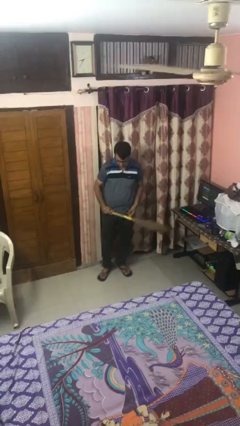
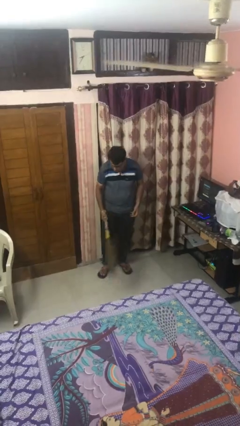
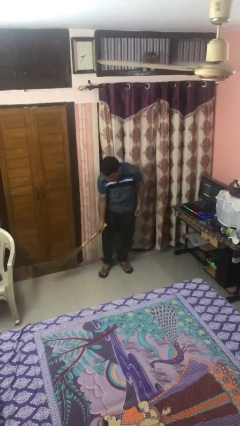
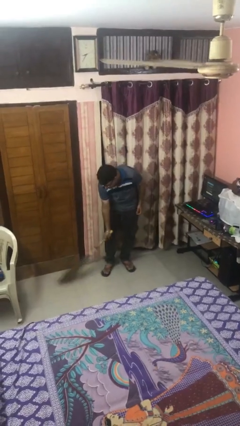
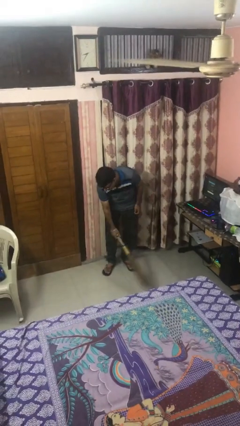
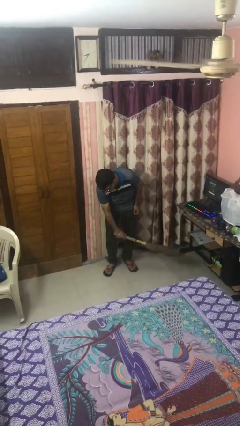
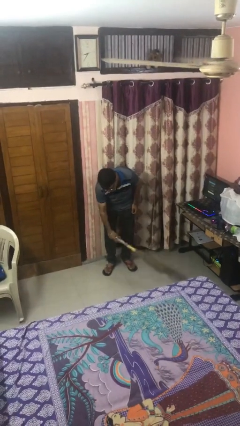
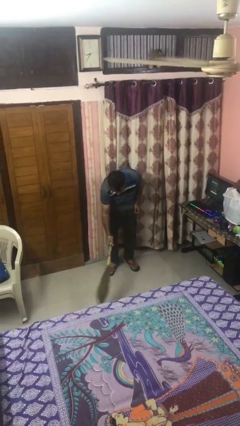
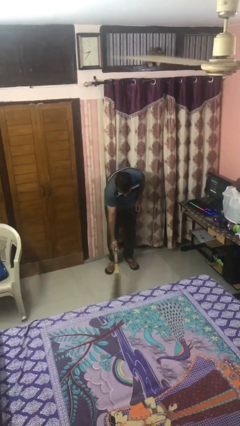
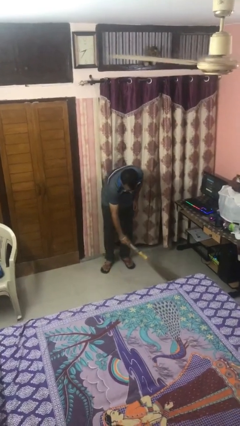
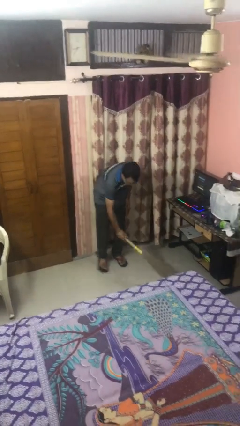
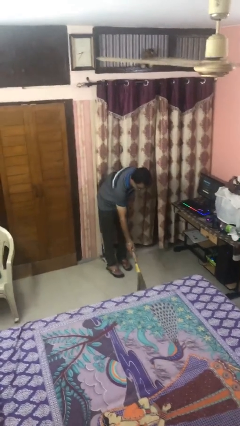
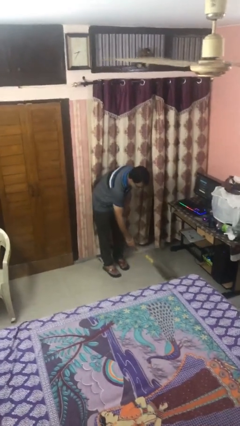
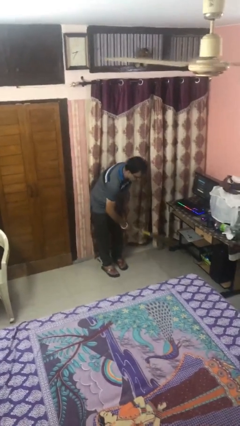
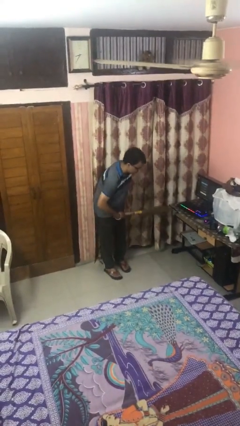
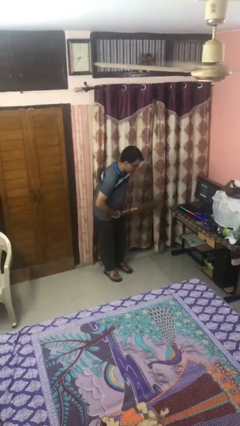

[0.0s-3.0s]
person sweeps floor

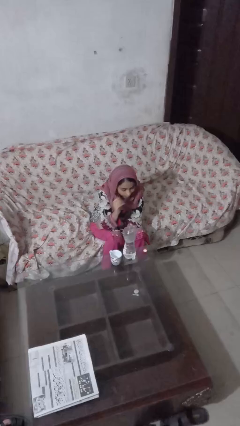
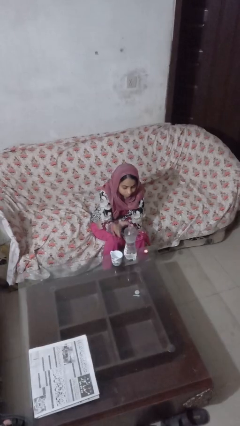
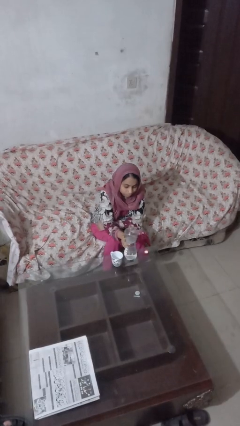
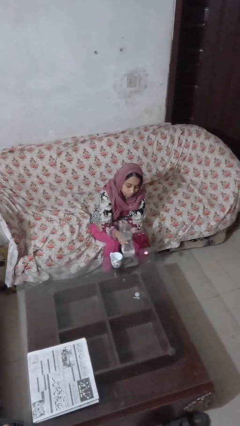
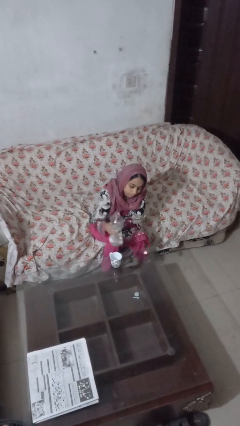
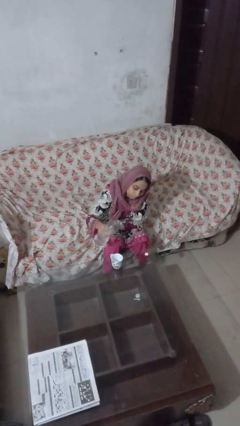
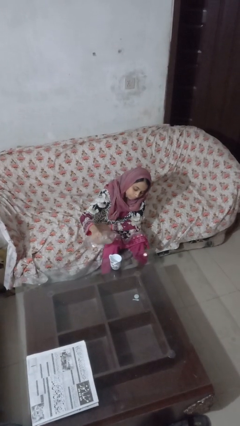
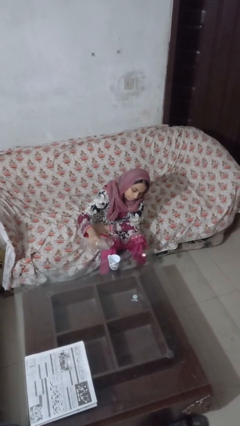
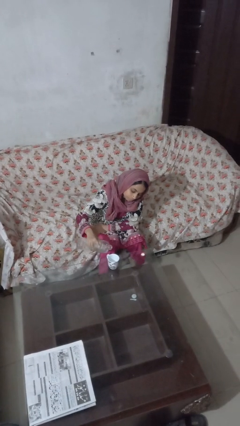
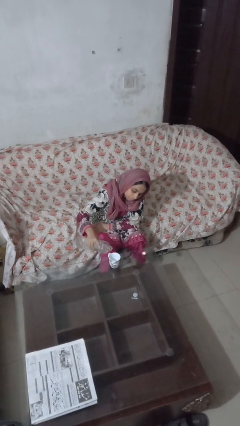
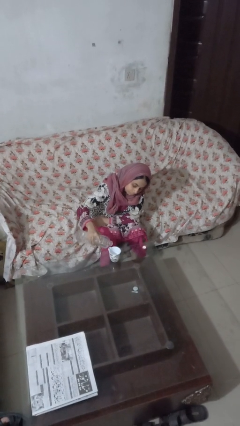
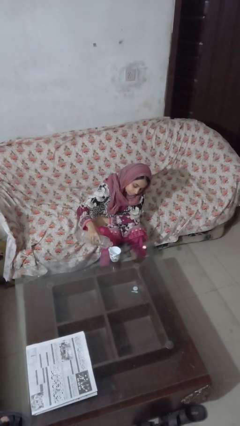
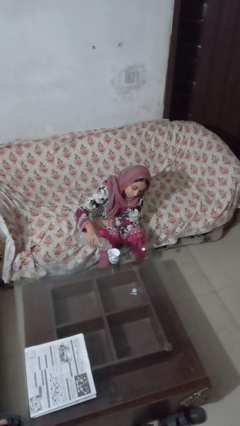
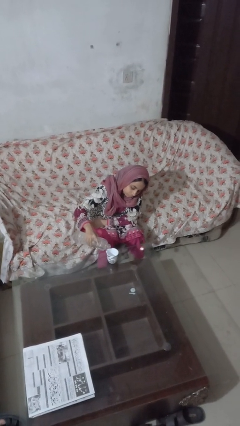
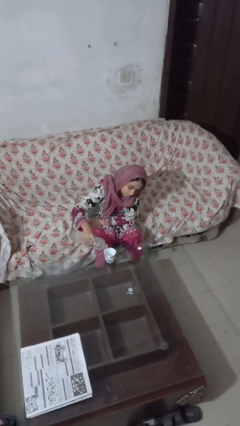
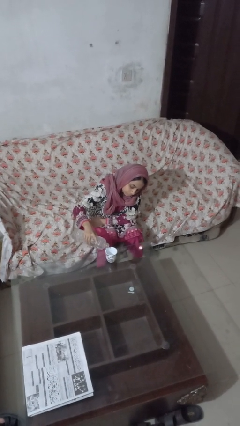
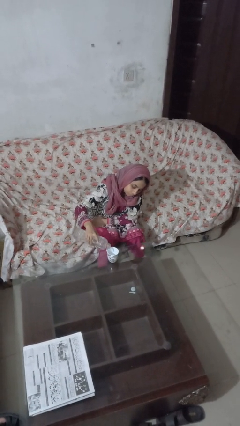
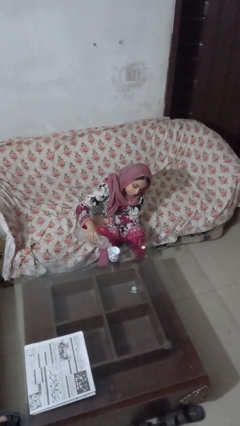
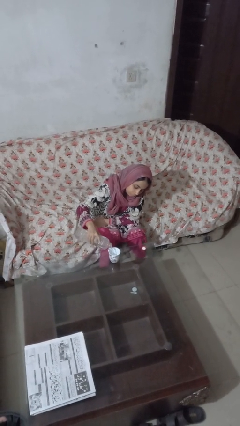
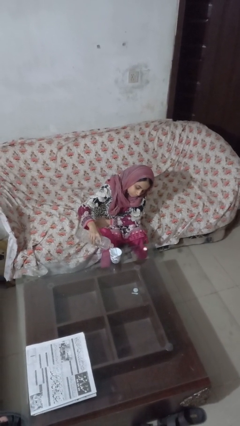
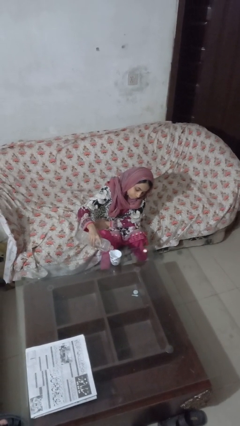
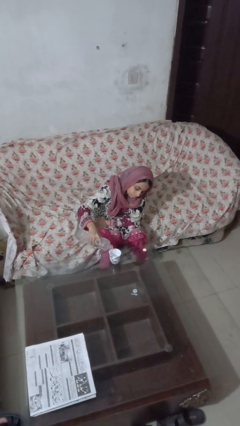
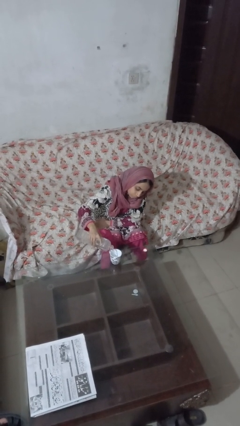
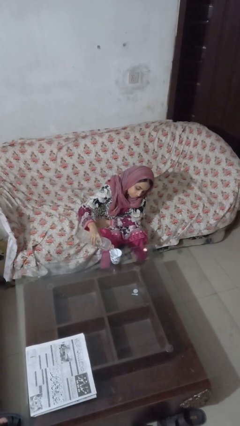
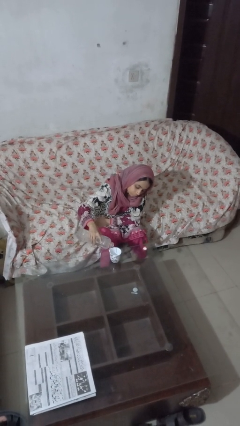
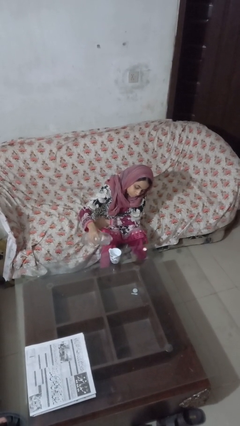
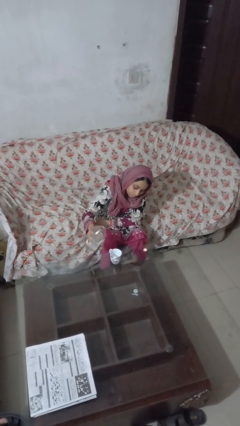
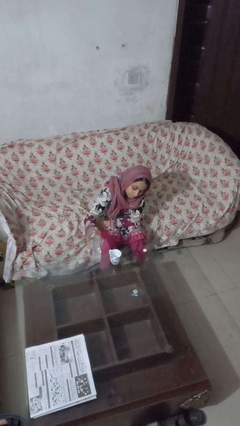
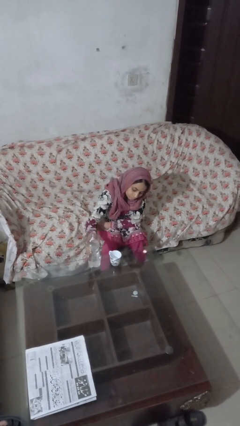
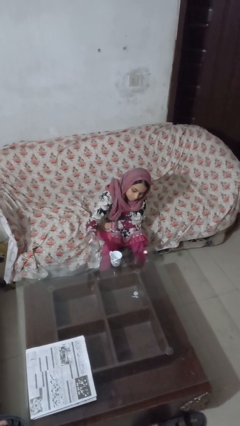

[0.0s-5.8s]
person pours liquid into cup

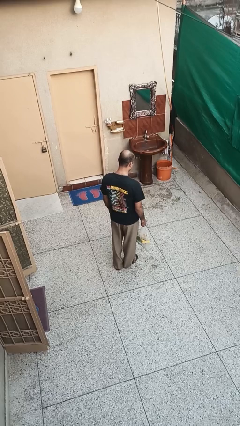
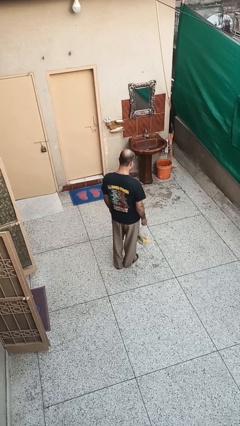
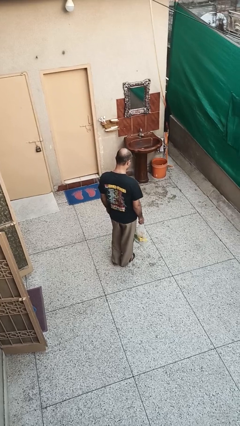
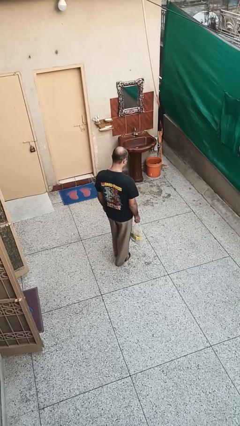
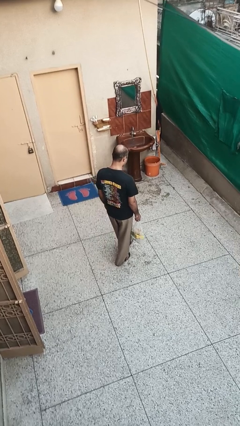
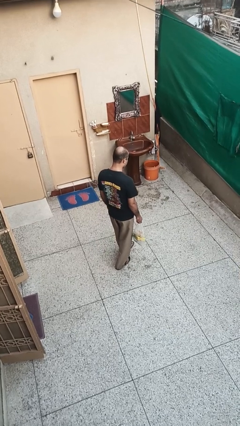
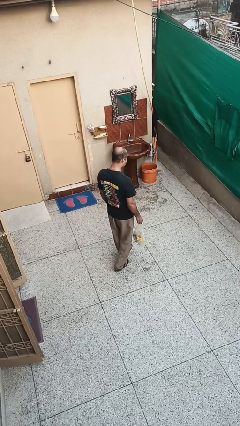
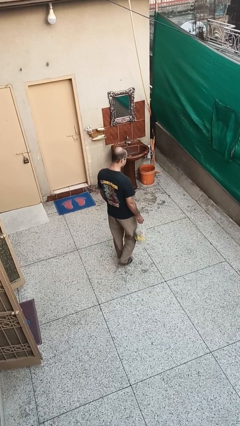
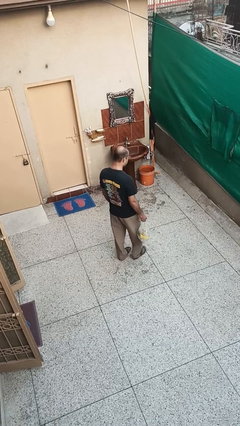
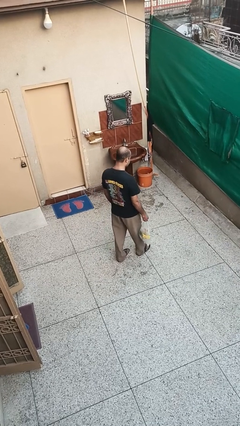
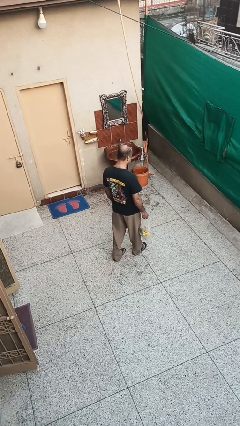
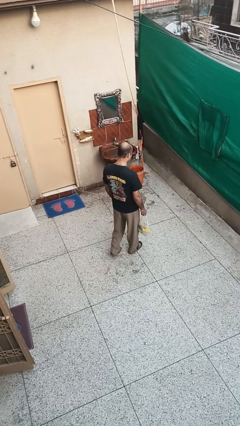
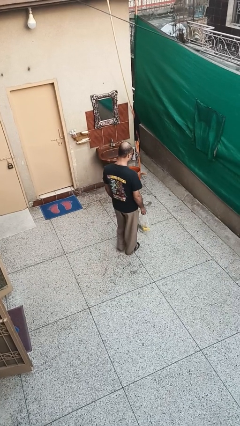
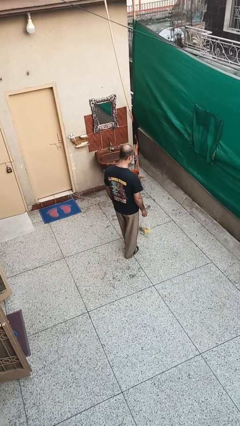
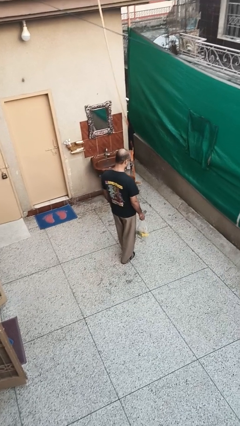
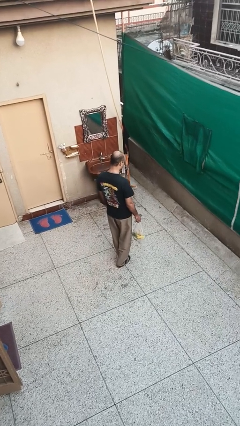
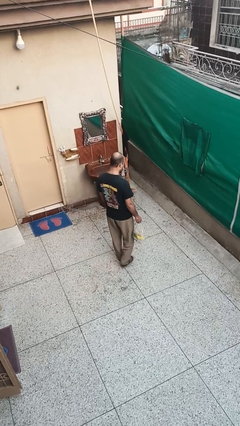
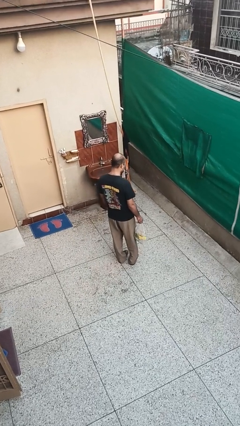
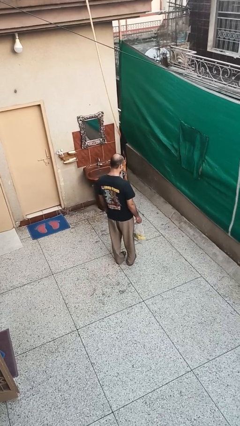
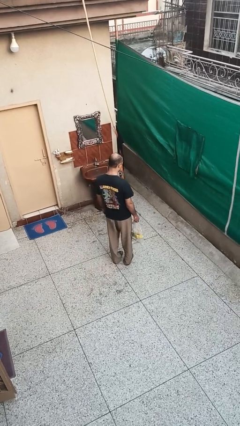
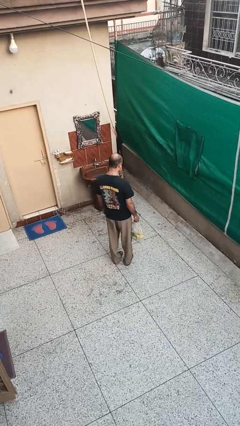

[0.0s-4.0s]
person carries groceries

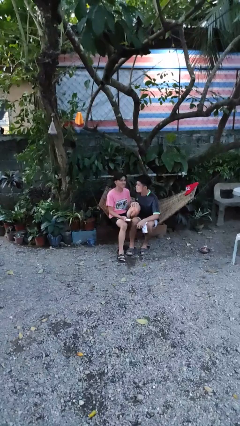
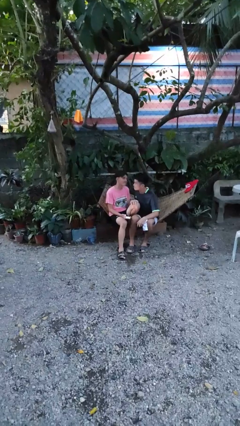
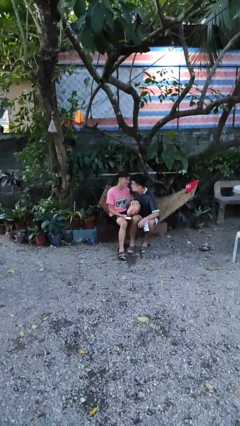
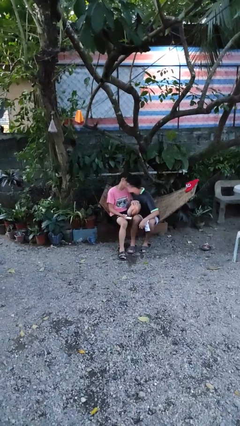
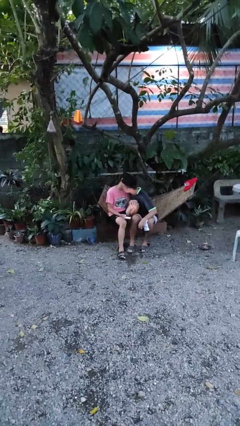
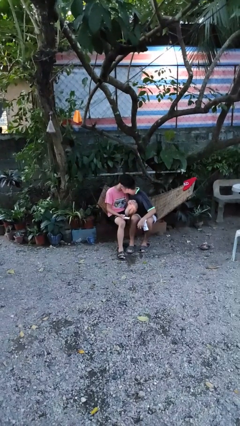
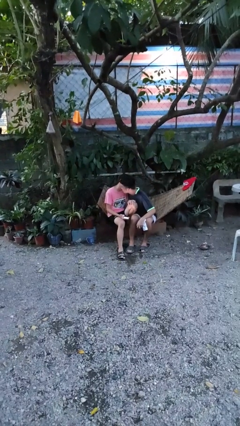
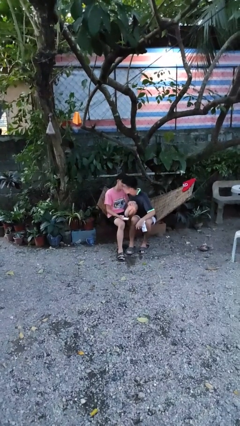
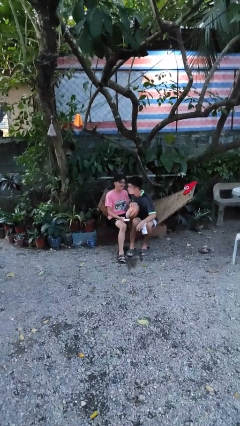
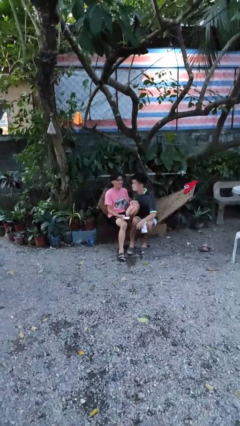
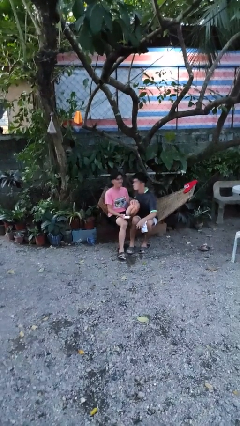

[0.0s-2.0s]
person kisses cheek of person

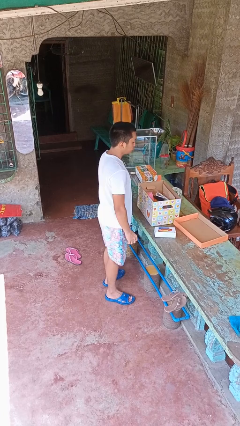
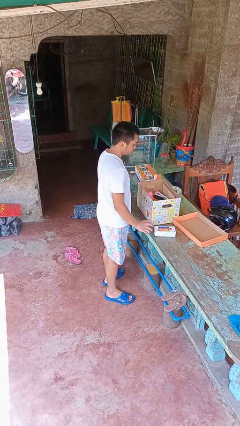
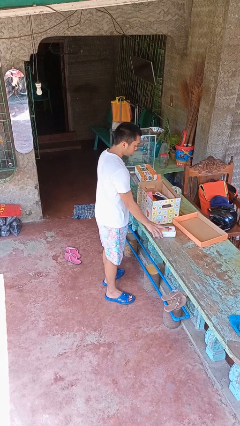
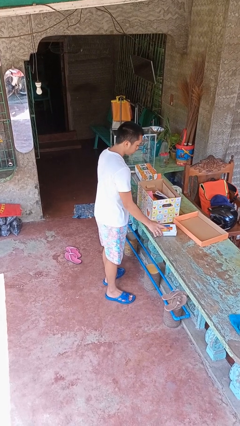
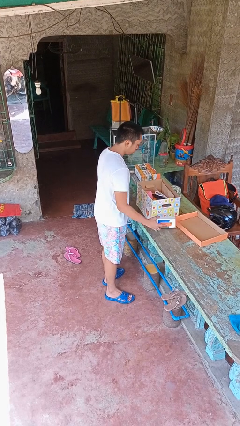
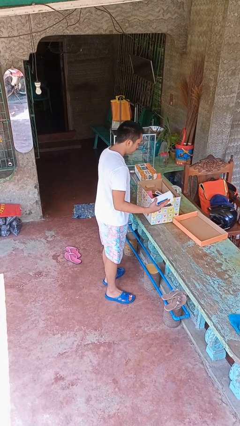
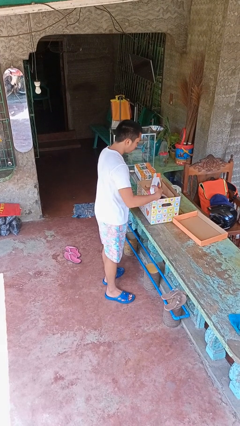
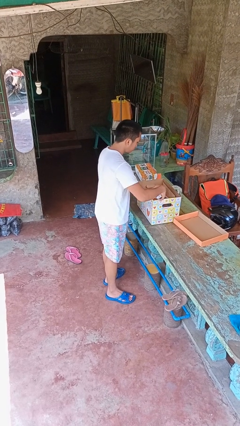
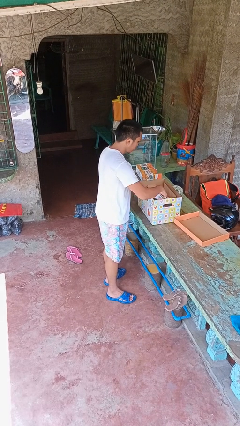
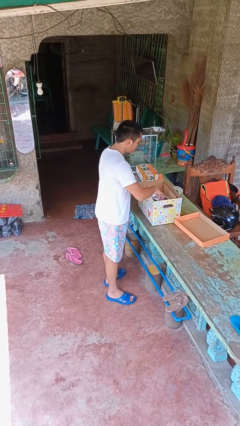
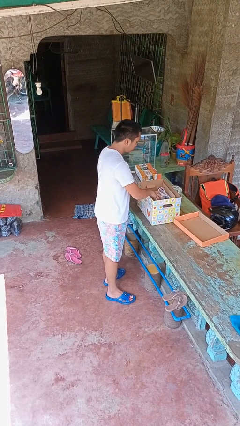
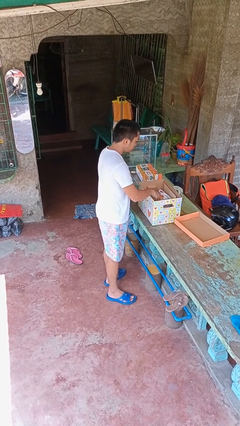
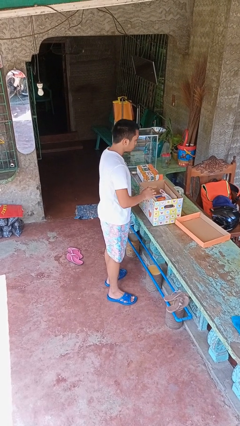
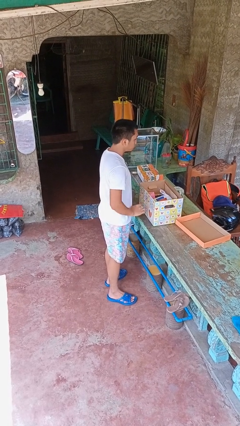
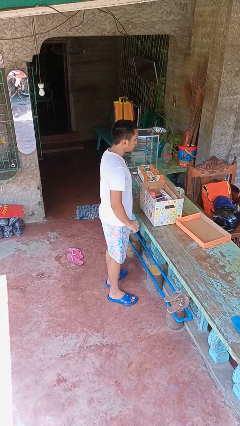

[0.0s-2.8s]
person puts object into box

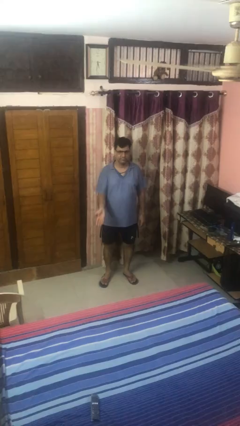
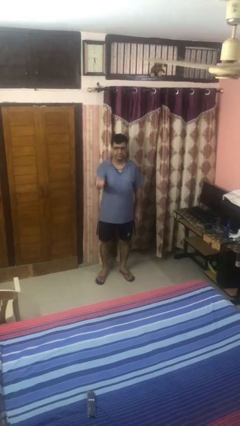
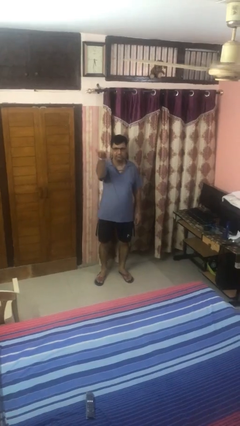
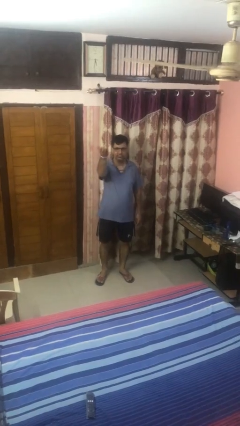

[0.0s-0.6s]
person gestures swipe up
